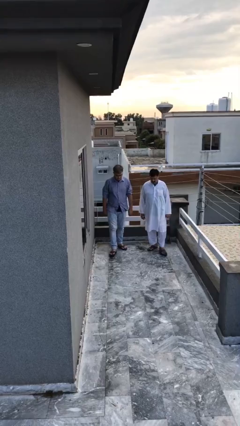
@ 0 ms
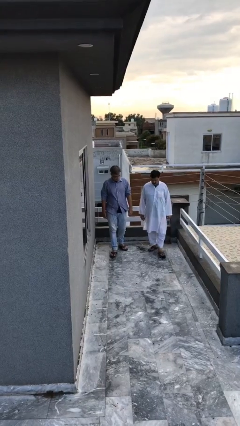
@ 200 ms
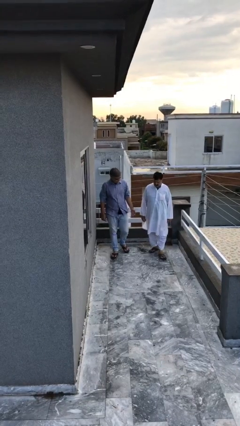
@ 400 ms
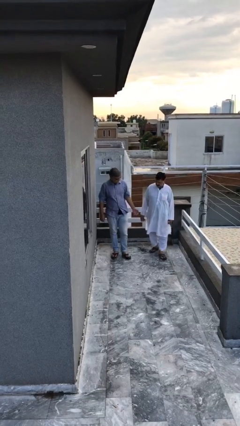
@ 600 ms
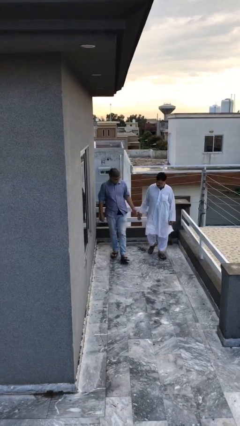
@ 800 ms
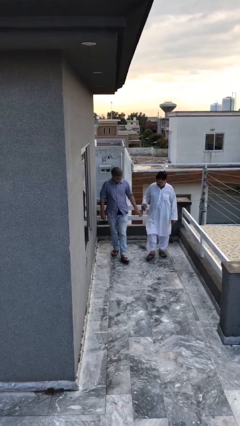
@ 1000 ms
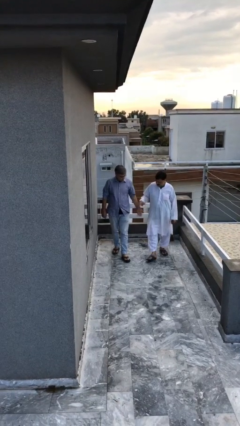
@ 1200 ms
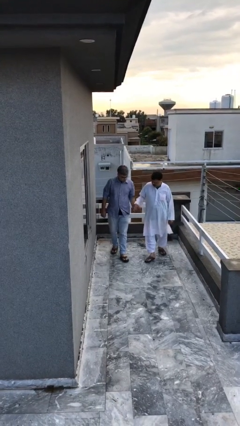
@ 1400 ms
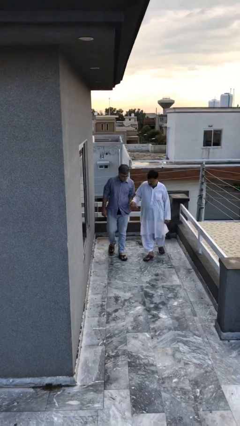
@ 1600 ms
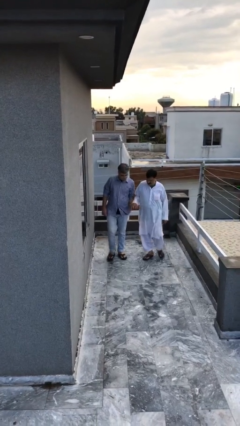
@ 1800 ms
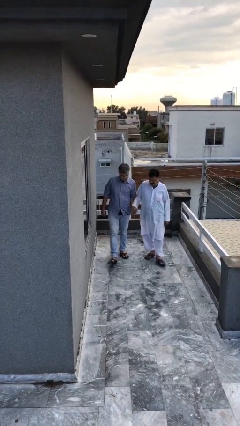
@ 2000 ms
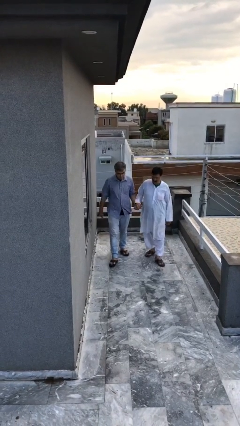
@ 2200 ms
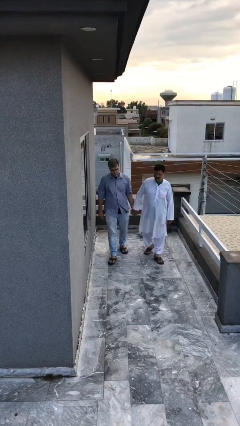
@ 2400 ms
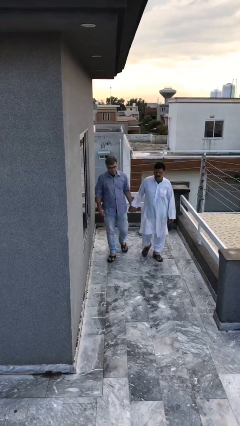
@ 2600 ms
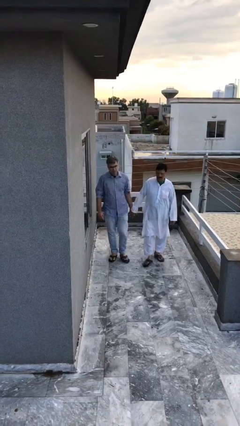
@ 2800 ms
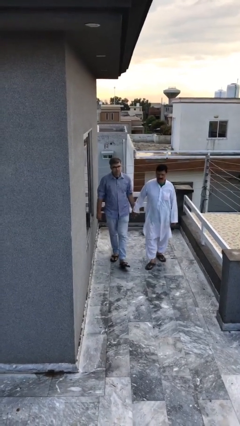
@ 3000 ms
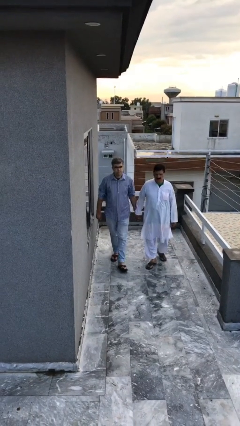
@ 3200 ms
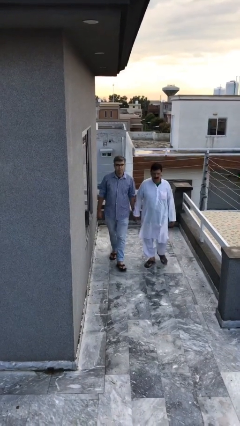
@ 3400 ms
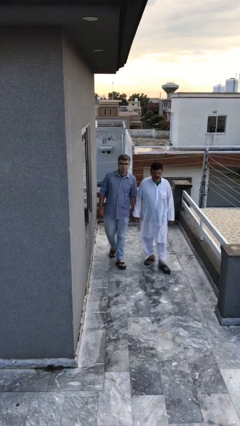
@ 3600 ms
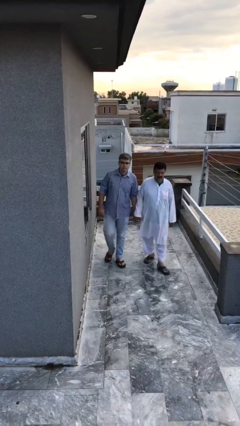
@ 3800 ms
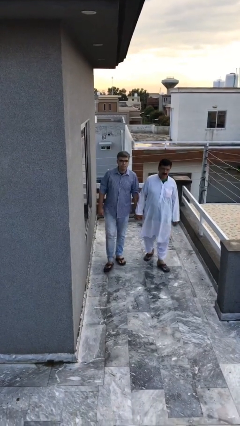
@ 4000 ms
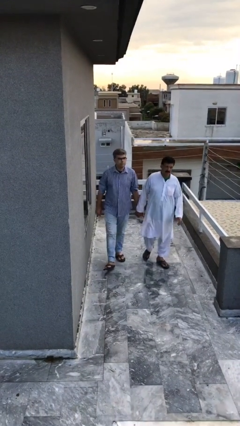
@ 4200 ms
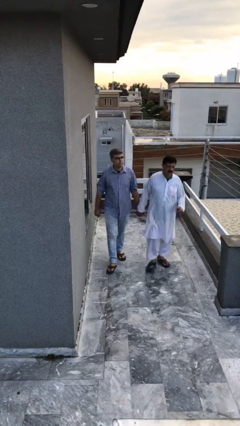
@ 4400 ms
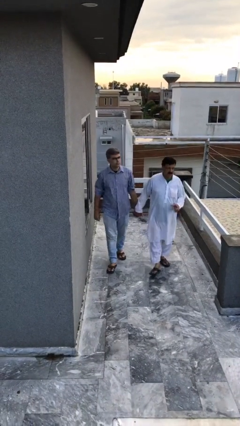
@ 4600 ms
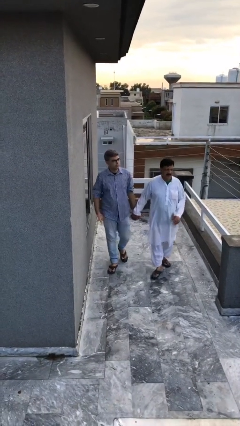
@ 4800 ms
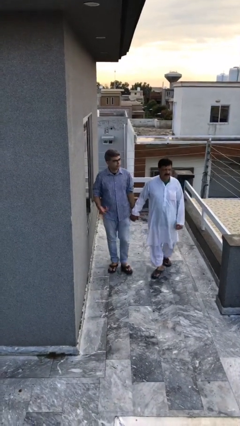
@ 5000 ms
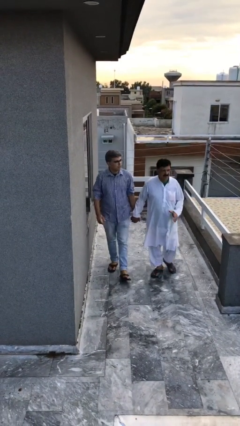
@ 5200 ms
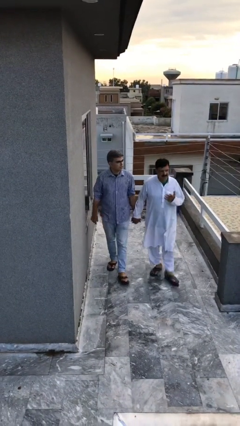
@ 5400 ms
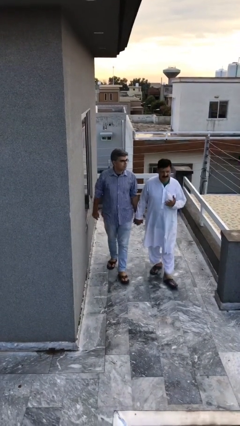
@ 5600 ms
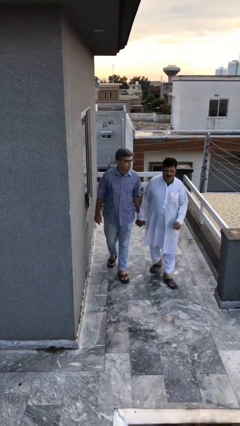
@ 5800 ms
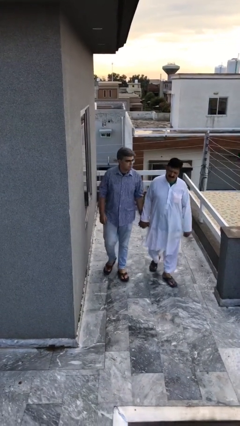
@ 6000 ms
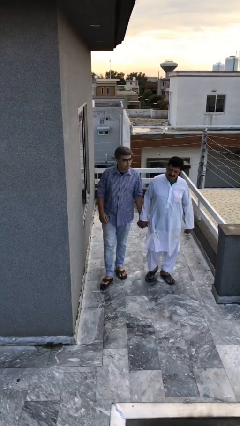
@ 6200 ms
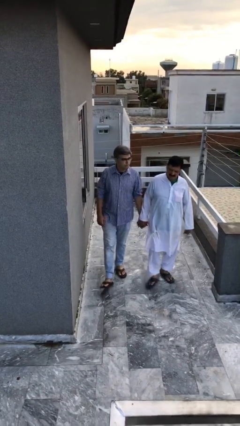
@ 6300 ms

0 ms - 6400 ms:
person holds hand

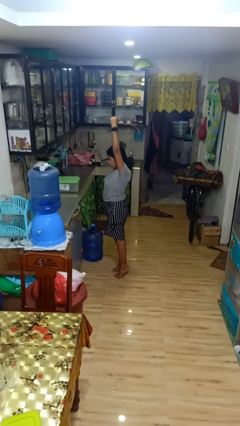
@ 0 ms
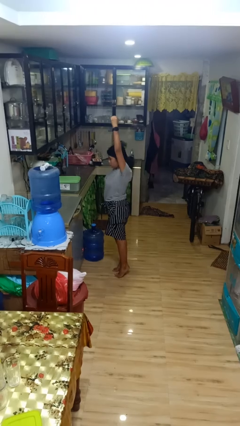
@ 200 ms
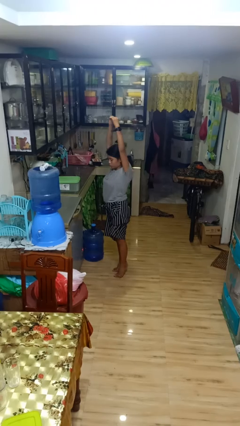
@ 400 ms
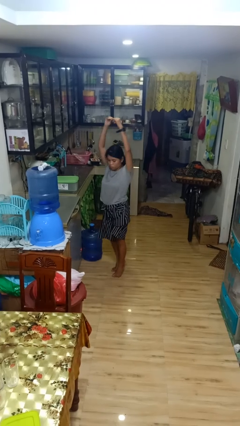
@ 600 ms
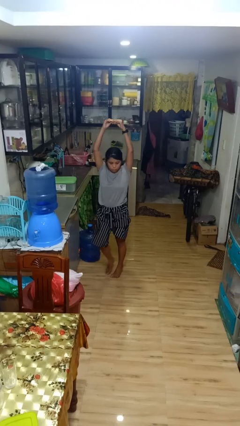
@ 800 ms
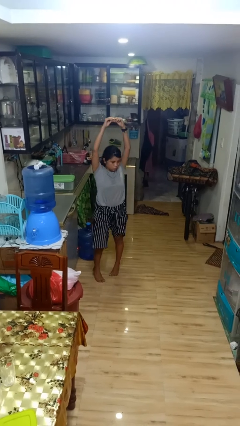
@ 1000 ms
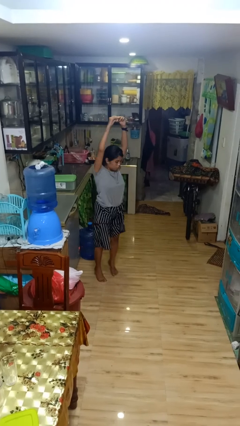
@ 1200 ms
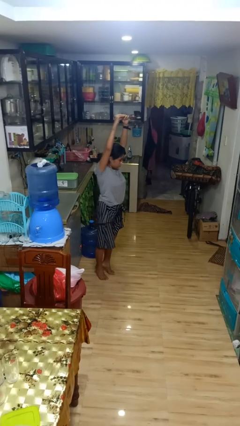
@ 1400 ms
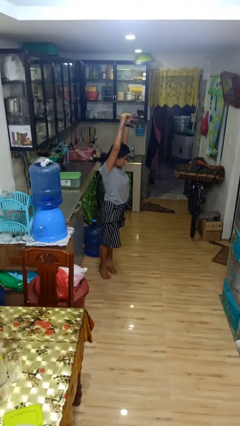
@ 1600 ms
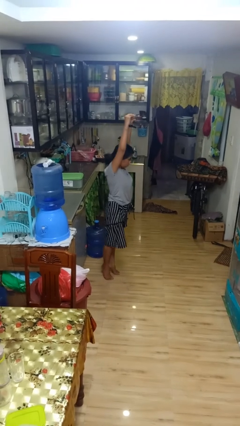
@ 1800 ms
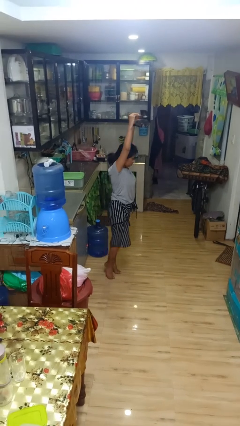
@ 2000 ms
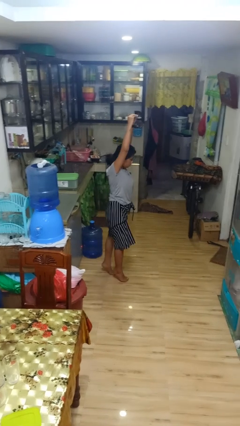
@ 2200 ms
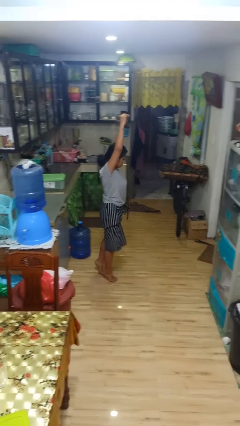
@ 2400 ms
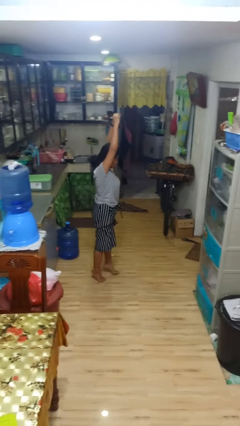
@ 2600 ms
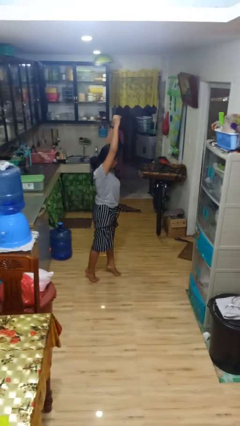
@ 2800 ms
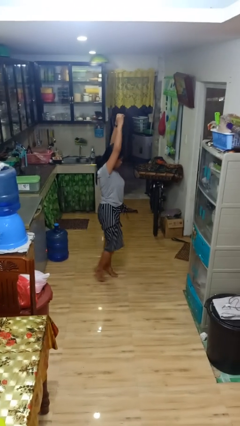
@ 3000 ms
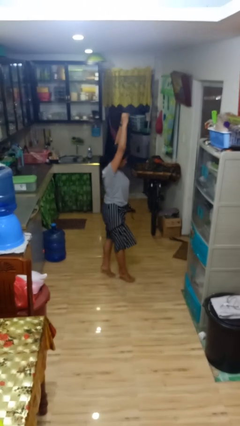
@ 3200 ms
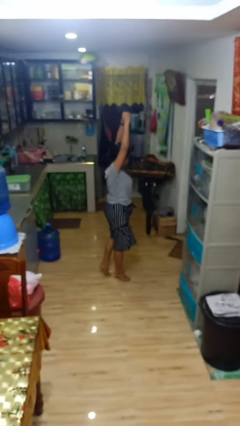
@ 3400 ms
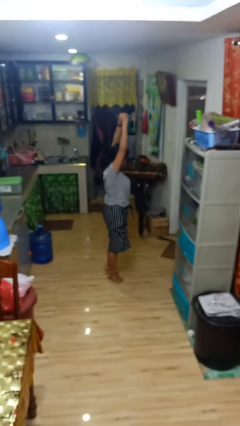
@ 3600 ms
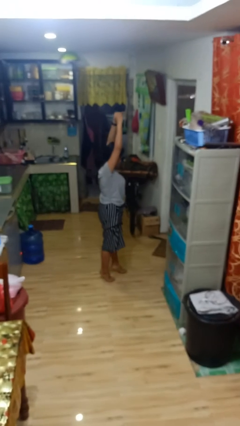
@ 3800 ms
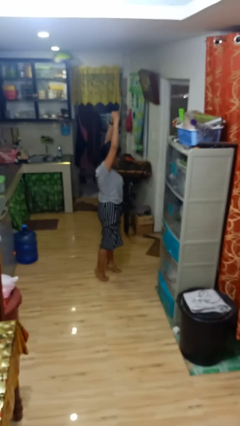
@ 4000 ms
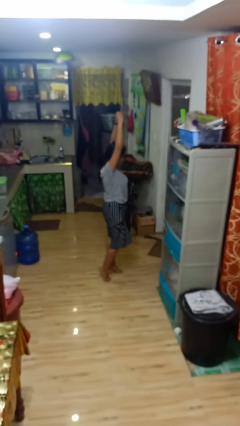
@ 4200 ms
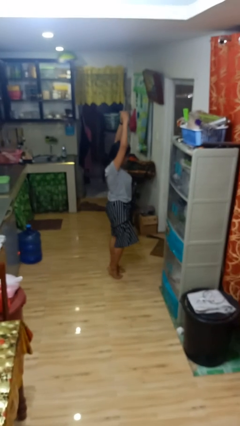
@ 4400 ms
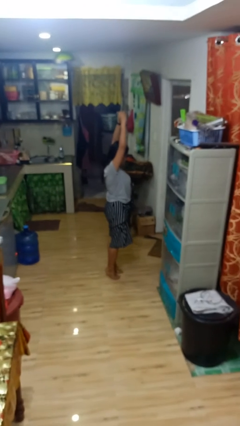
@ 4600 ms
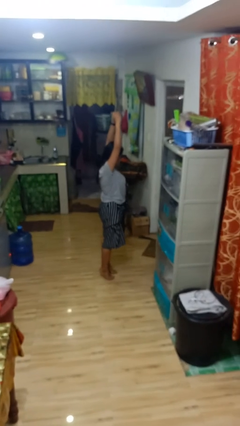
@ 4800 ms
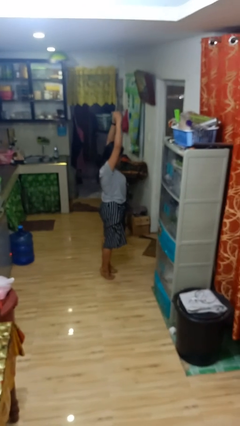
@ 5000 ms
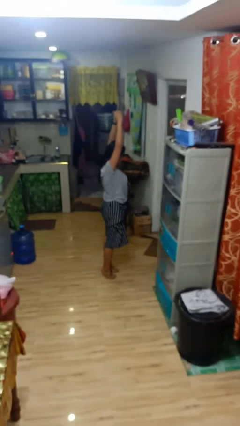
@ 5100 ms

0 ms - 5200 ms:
person walks tiptoe

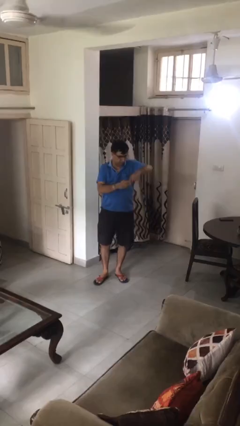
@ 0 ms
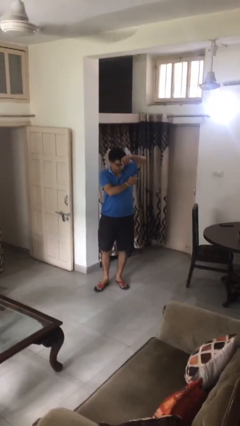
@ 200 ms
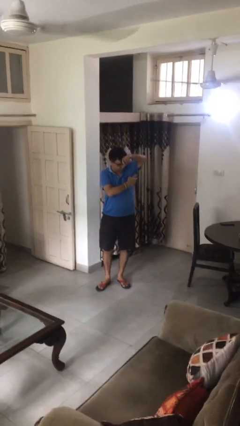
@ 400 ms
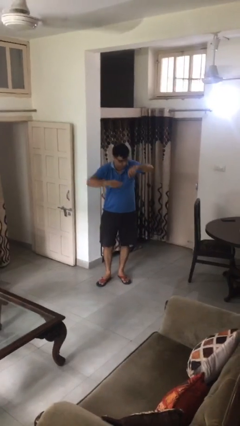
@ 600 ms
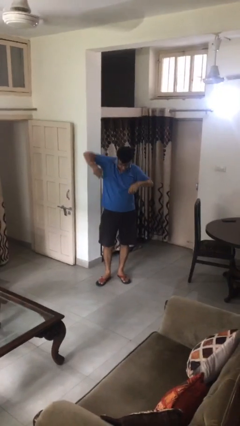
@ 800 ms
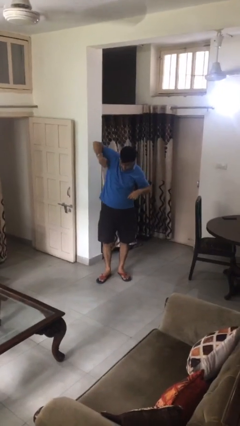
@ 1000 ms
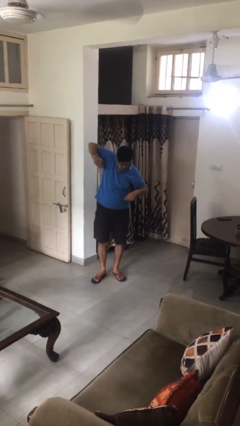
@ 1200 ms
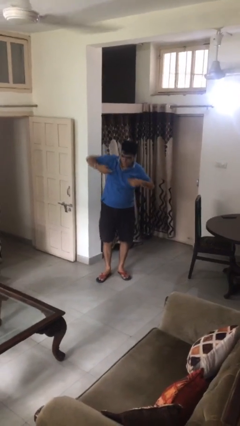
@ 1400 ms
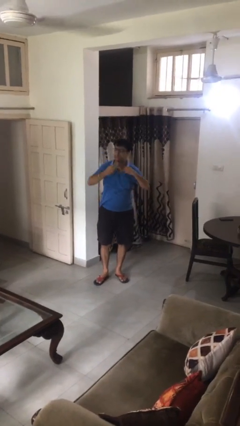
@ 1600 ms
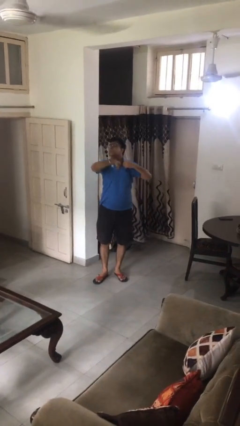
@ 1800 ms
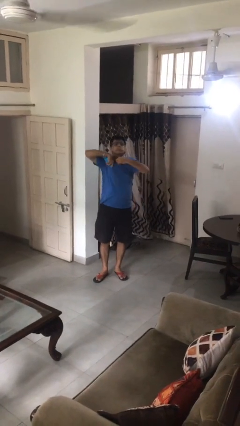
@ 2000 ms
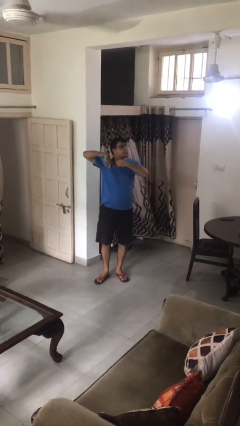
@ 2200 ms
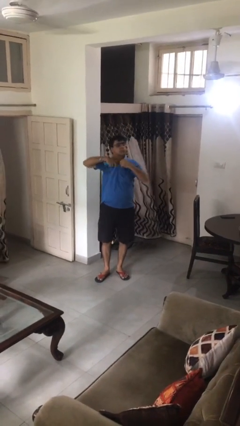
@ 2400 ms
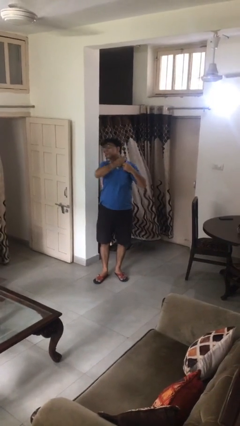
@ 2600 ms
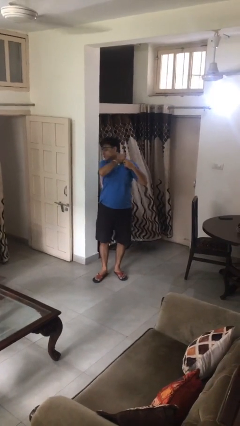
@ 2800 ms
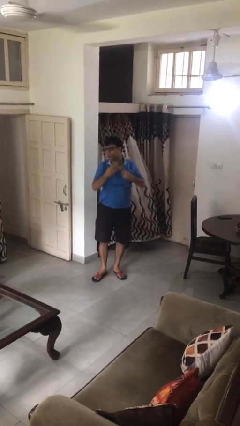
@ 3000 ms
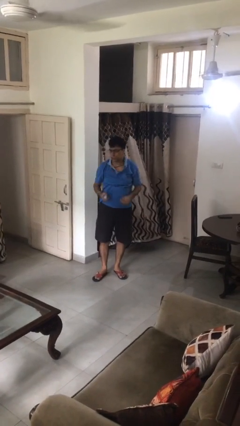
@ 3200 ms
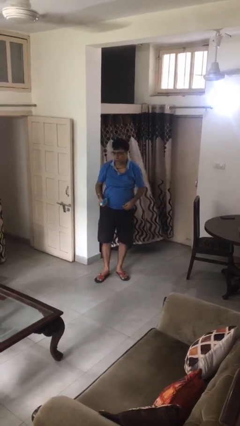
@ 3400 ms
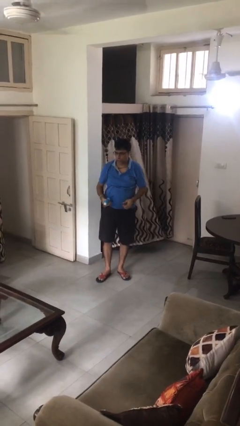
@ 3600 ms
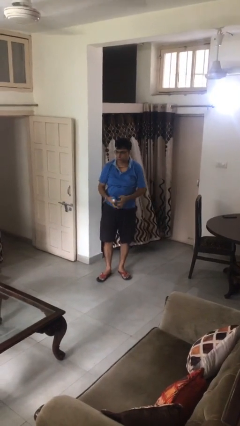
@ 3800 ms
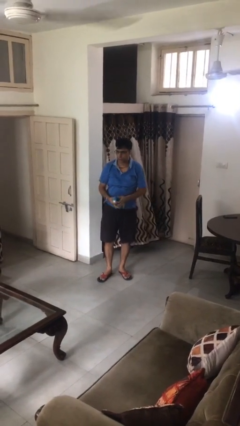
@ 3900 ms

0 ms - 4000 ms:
person applies deodorant

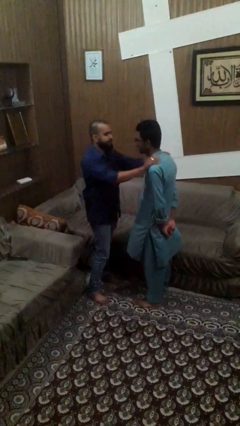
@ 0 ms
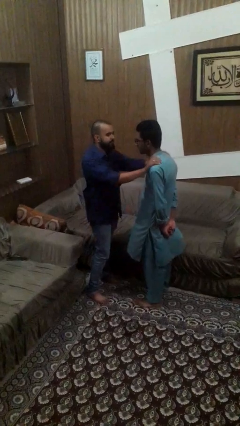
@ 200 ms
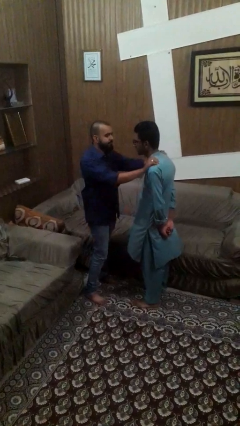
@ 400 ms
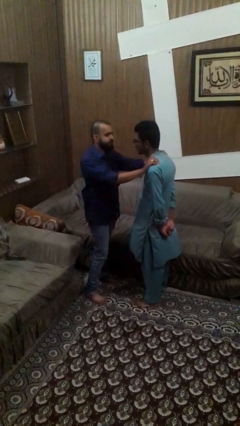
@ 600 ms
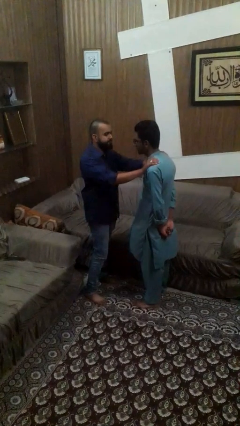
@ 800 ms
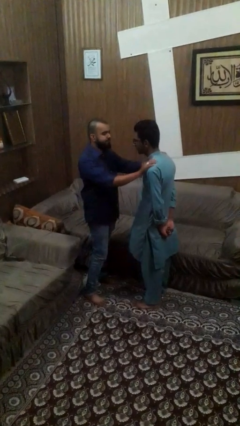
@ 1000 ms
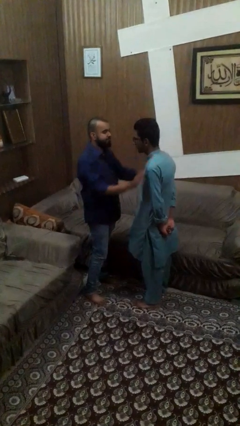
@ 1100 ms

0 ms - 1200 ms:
person pounds shoulders of person

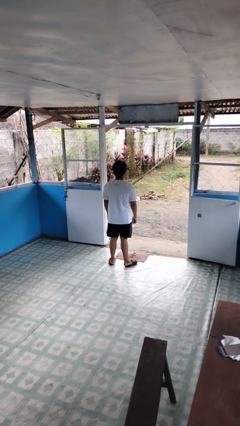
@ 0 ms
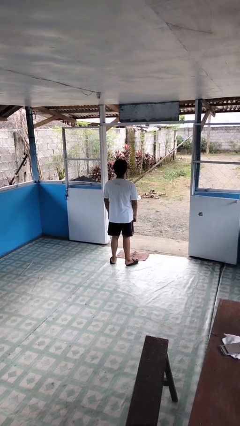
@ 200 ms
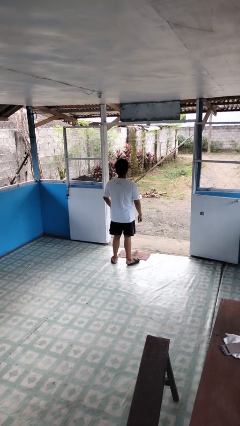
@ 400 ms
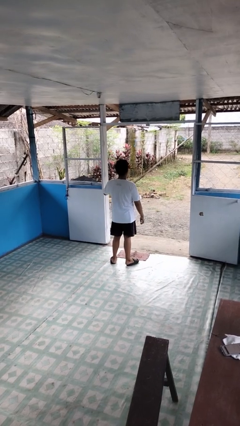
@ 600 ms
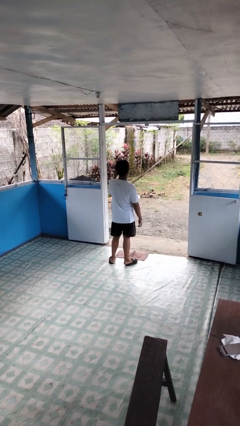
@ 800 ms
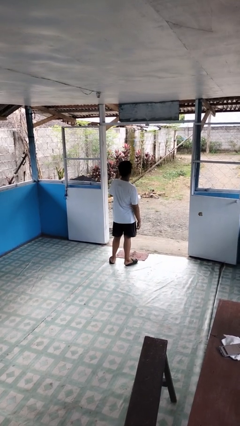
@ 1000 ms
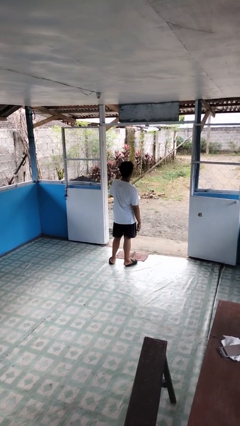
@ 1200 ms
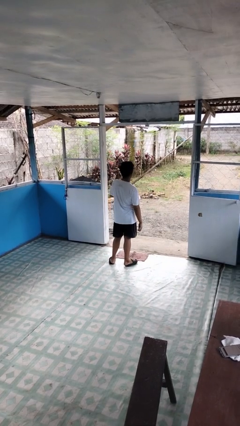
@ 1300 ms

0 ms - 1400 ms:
person gestures number one
